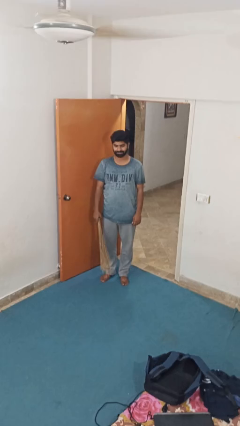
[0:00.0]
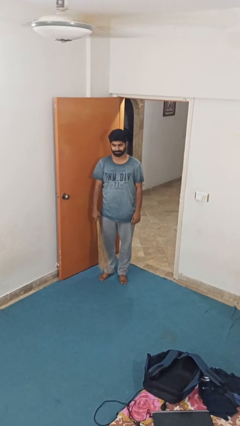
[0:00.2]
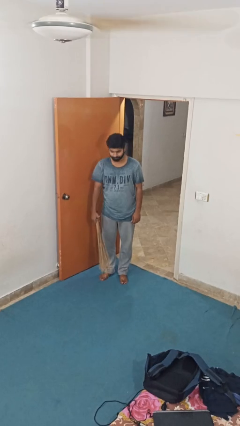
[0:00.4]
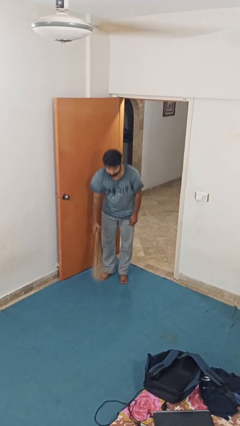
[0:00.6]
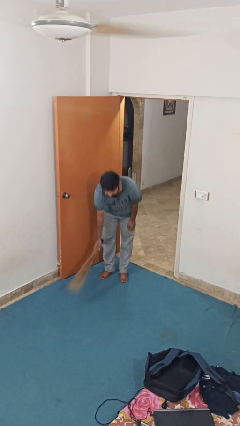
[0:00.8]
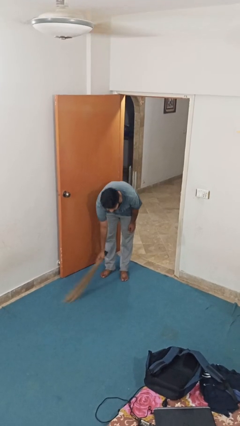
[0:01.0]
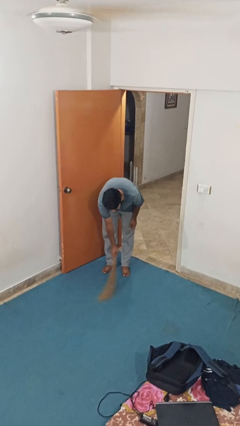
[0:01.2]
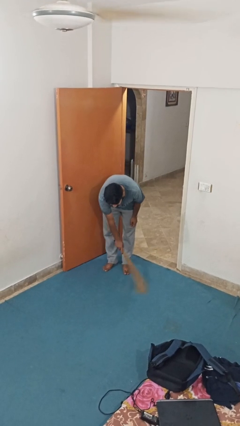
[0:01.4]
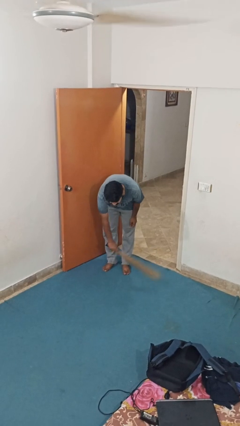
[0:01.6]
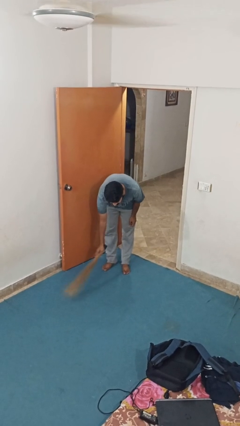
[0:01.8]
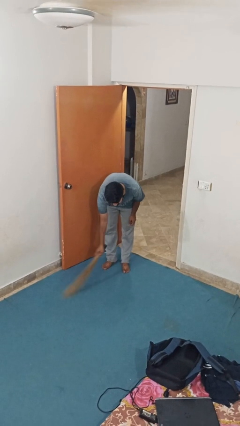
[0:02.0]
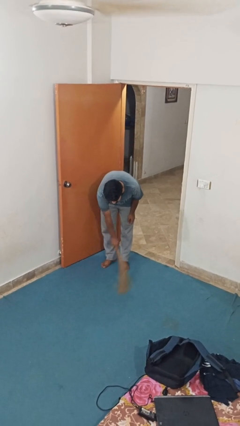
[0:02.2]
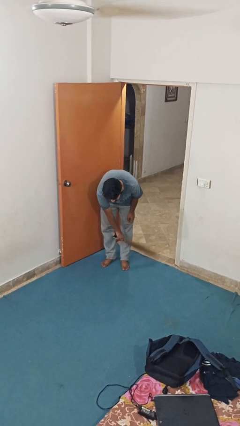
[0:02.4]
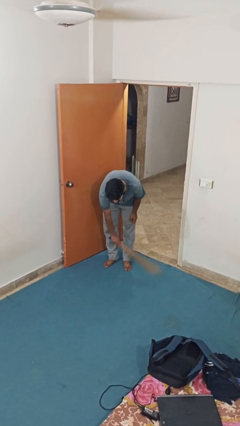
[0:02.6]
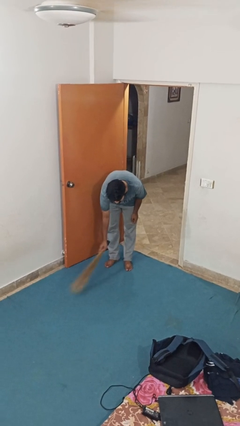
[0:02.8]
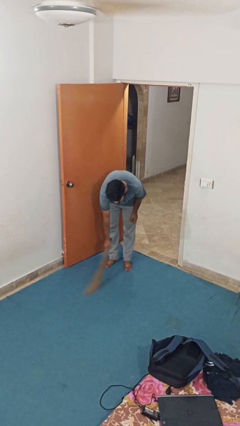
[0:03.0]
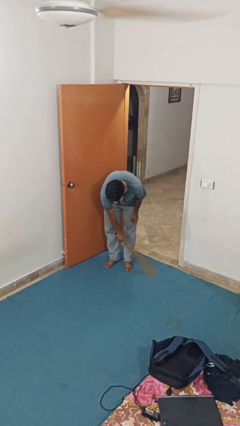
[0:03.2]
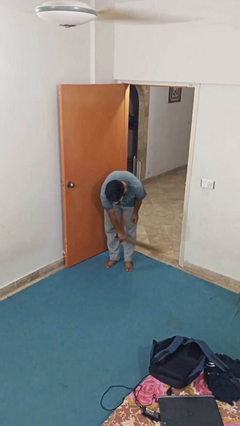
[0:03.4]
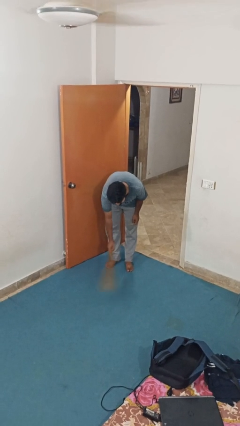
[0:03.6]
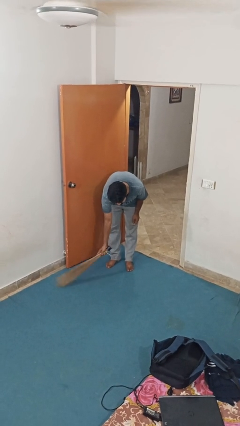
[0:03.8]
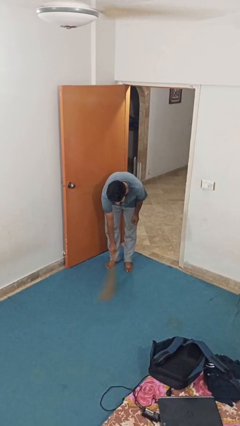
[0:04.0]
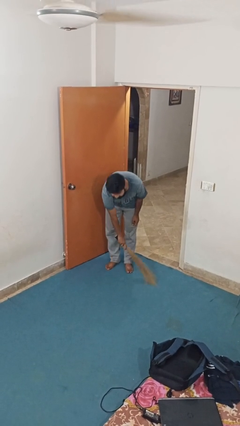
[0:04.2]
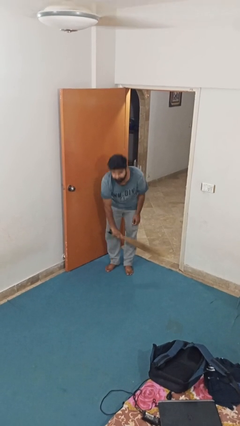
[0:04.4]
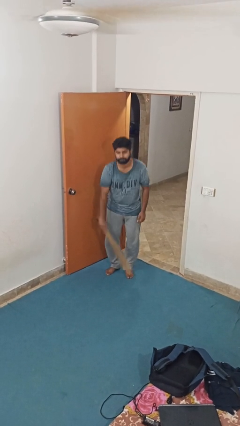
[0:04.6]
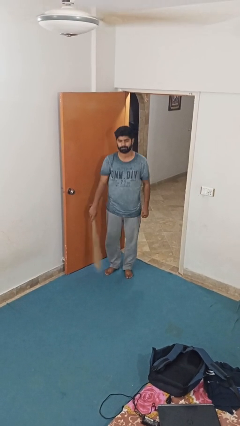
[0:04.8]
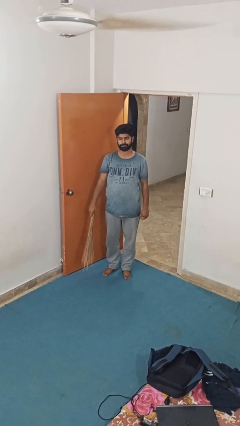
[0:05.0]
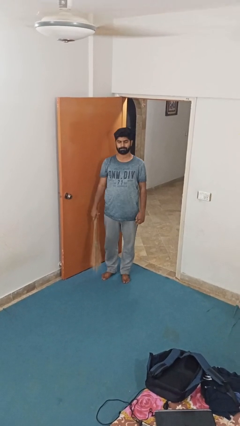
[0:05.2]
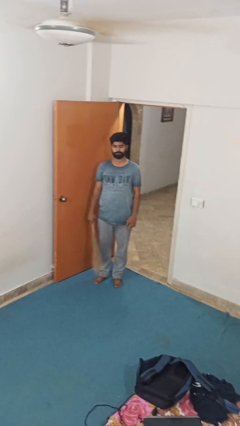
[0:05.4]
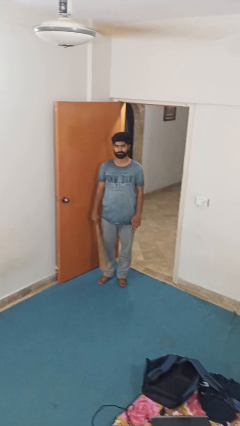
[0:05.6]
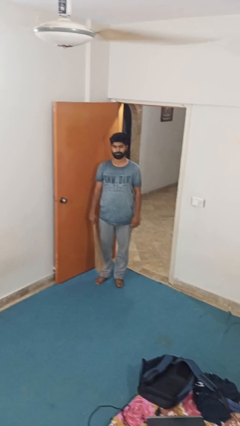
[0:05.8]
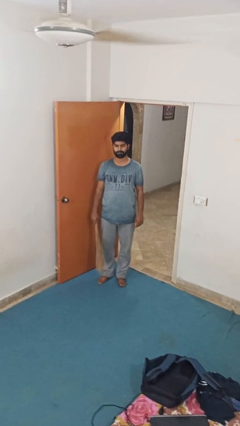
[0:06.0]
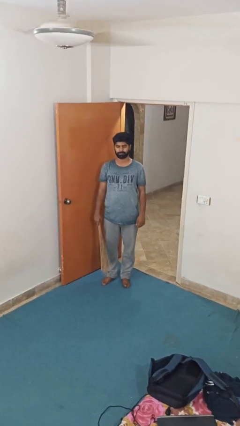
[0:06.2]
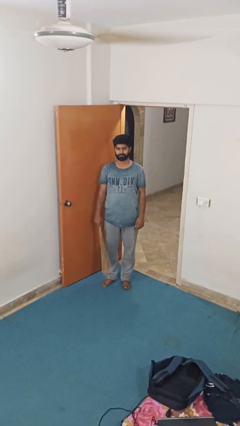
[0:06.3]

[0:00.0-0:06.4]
person sweeps floor

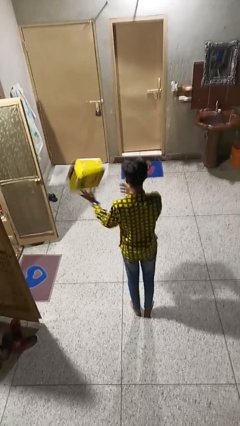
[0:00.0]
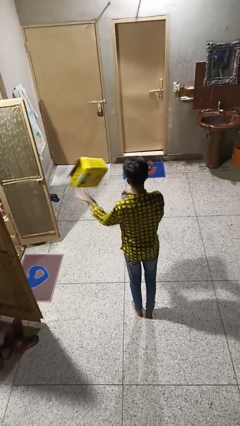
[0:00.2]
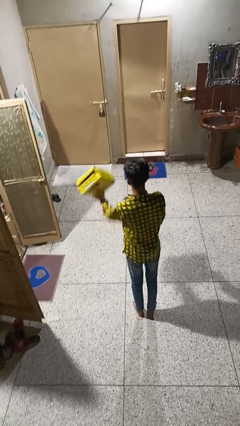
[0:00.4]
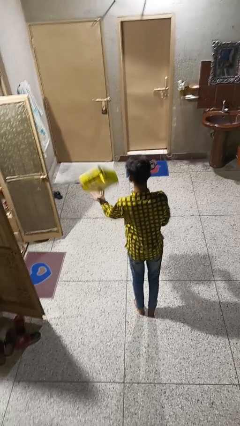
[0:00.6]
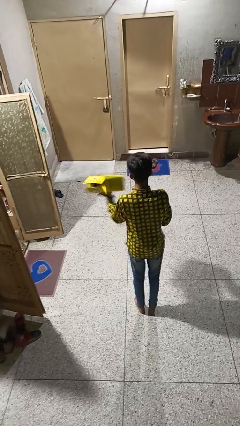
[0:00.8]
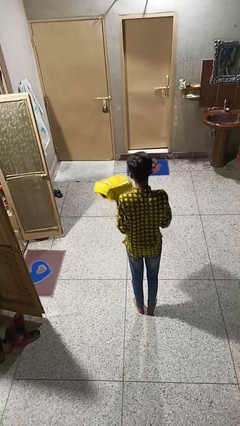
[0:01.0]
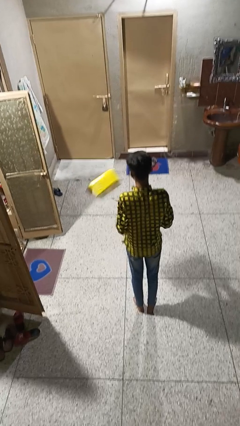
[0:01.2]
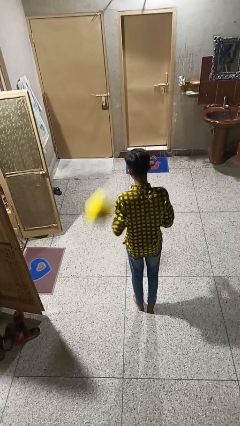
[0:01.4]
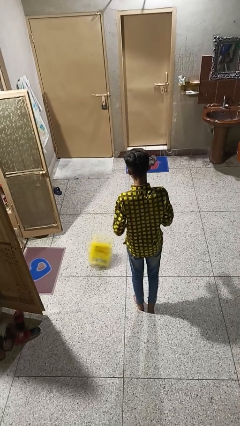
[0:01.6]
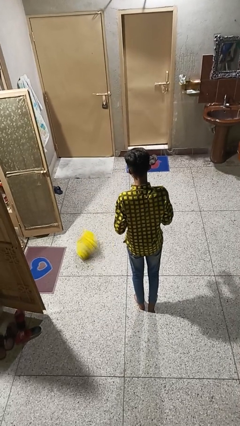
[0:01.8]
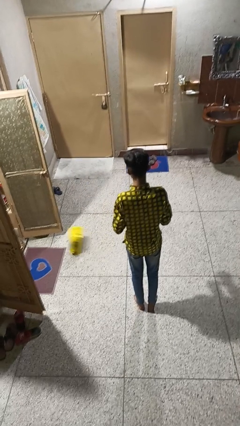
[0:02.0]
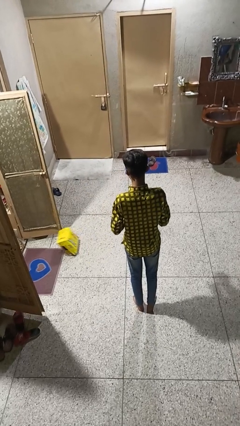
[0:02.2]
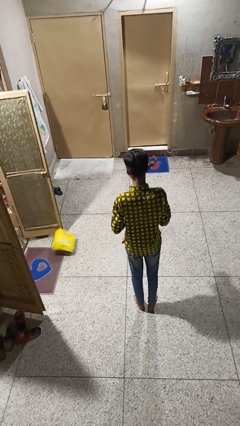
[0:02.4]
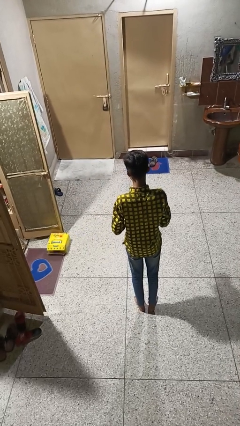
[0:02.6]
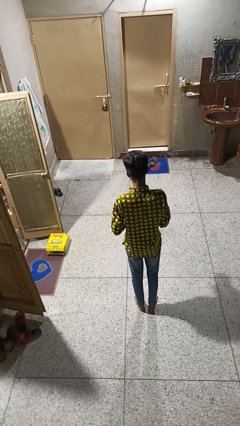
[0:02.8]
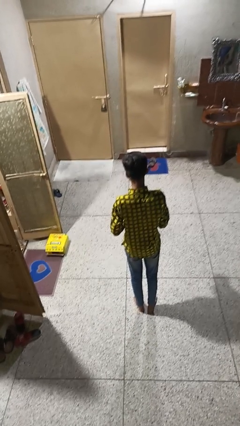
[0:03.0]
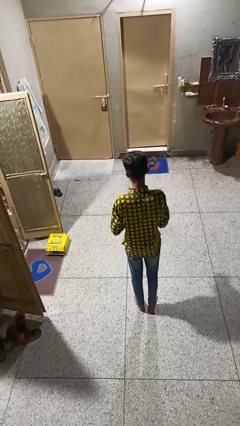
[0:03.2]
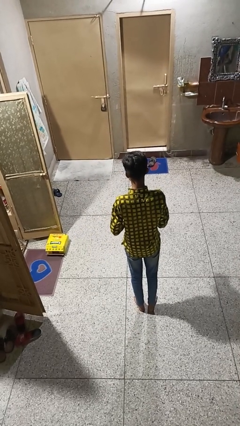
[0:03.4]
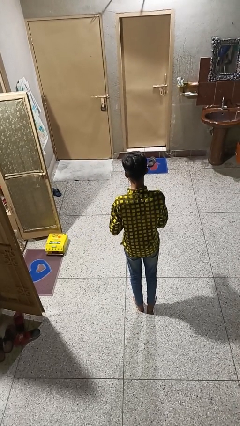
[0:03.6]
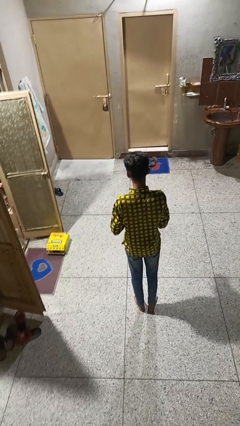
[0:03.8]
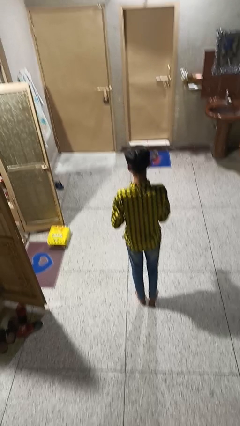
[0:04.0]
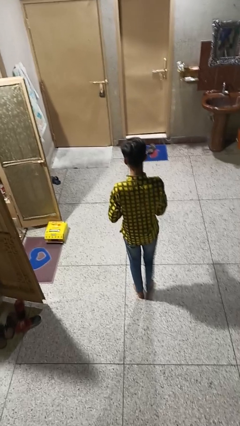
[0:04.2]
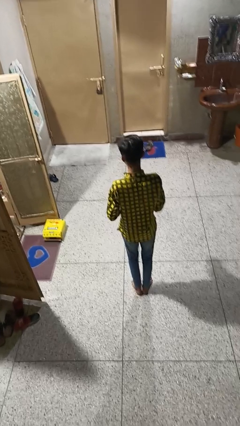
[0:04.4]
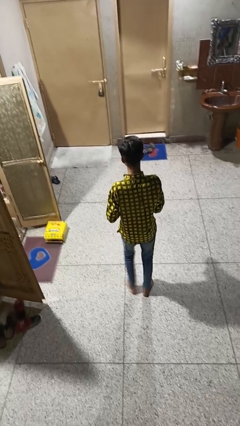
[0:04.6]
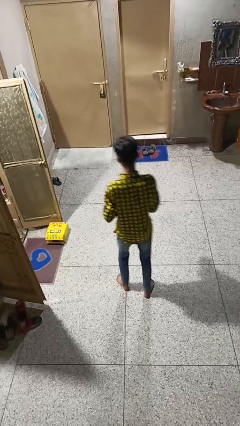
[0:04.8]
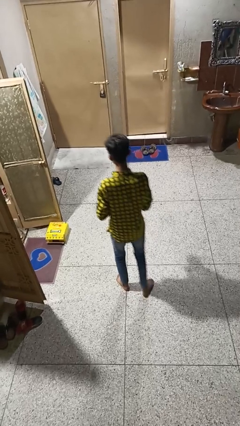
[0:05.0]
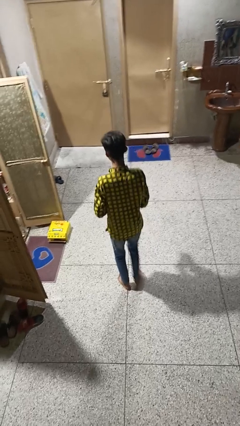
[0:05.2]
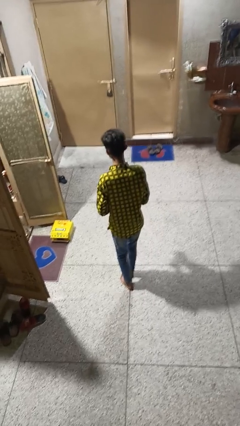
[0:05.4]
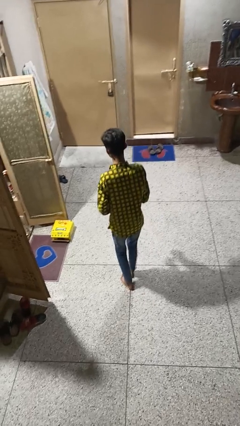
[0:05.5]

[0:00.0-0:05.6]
person catches dropped object

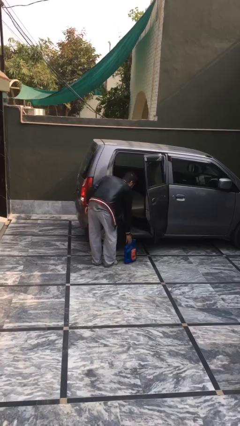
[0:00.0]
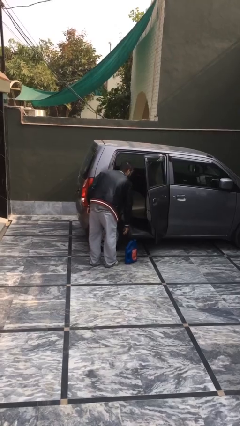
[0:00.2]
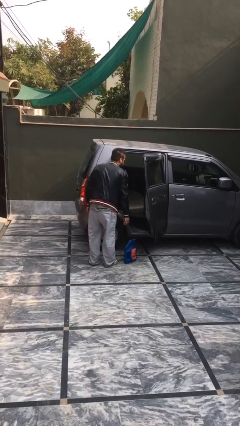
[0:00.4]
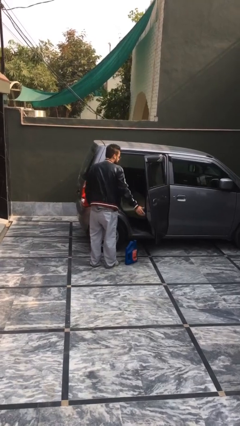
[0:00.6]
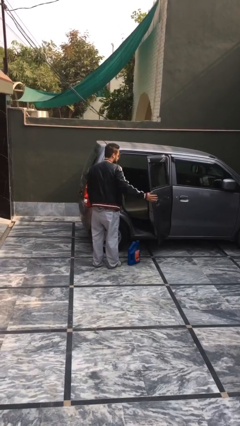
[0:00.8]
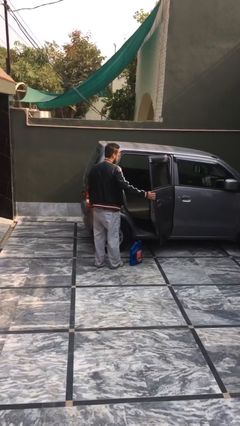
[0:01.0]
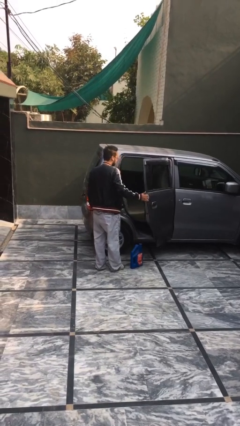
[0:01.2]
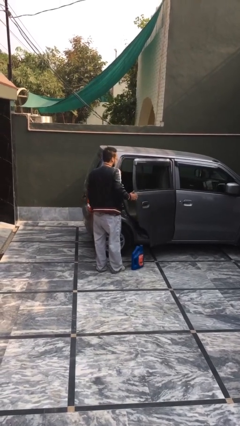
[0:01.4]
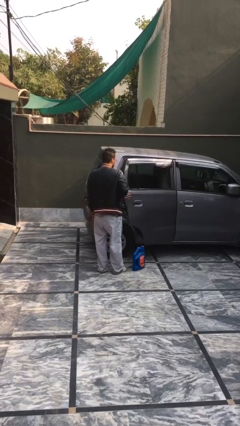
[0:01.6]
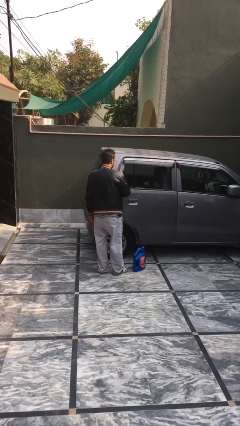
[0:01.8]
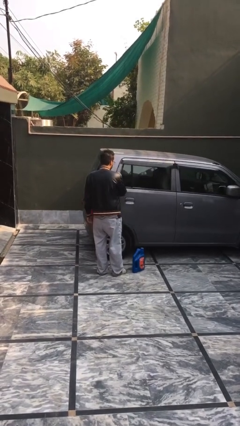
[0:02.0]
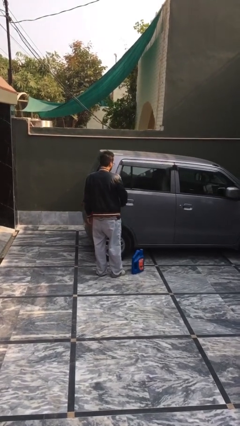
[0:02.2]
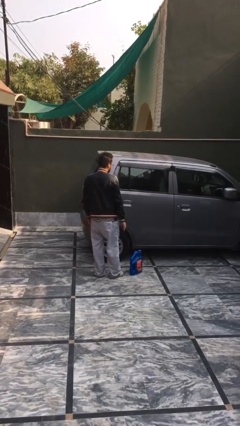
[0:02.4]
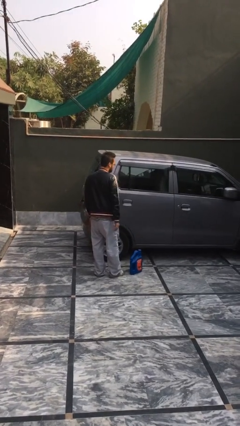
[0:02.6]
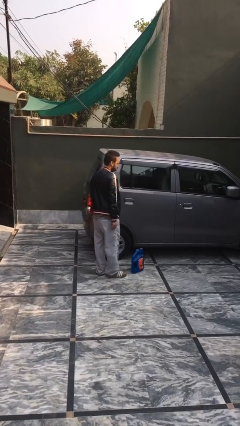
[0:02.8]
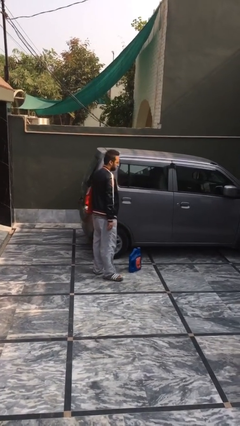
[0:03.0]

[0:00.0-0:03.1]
person closes car door

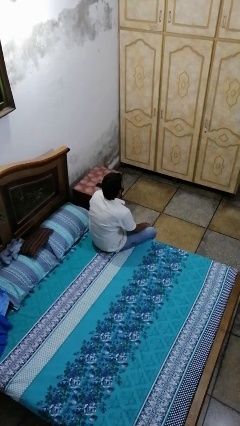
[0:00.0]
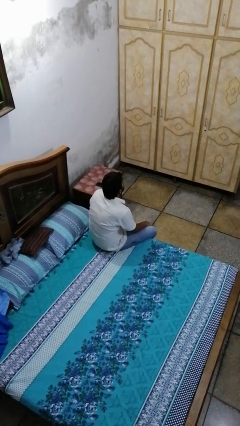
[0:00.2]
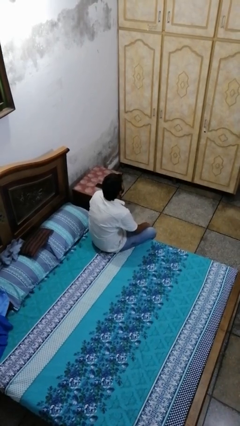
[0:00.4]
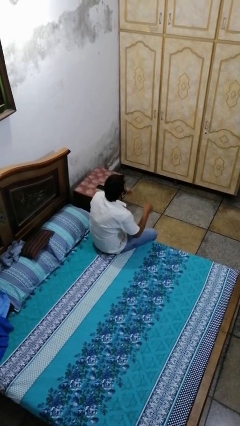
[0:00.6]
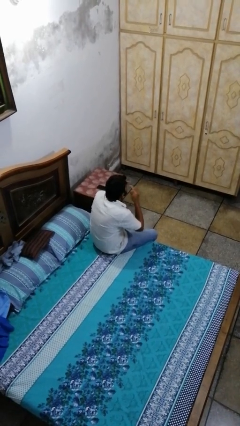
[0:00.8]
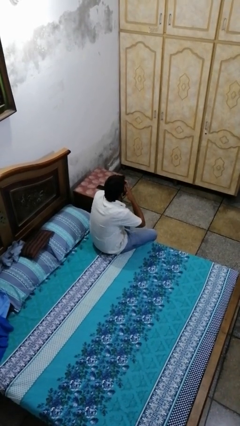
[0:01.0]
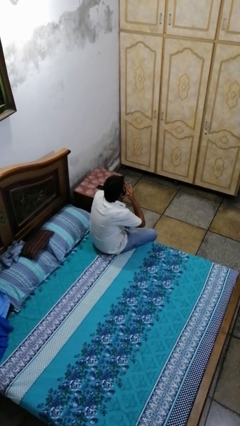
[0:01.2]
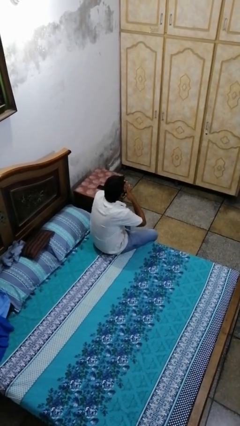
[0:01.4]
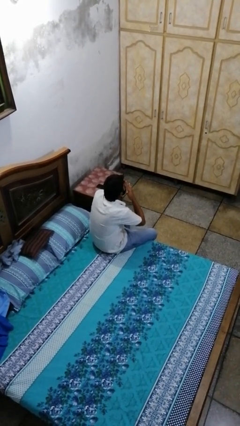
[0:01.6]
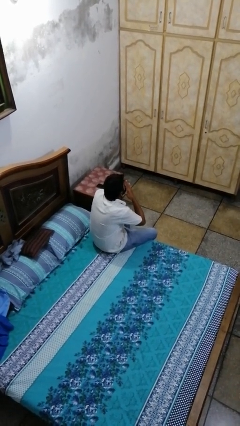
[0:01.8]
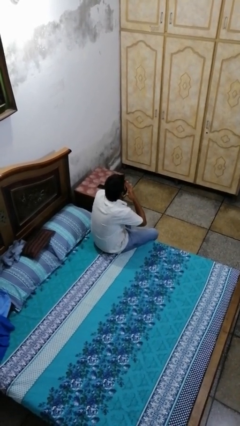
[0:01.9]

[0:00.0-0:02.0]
person rubs eyes

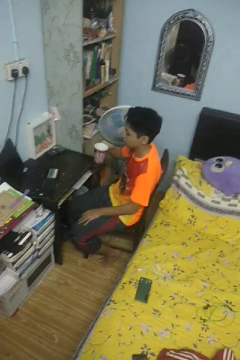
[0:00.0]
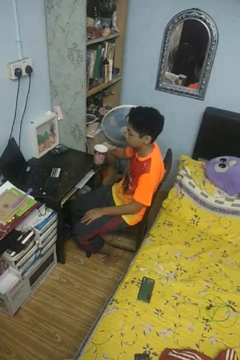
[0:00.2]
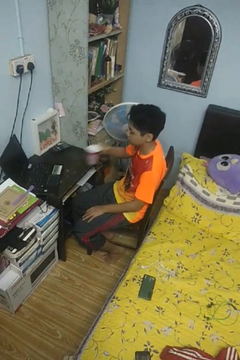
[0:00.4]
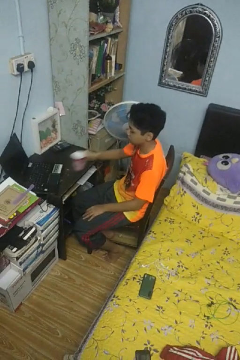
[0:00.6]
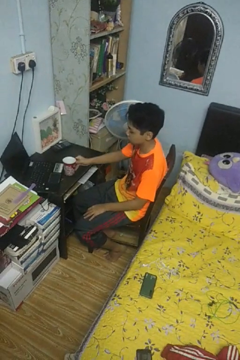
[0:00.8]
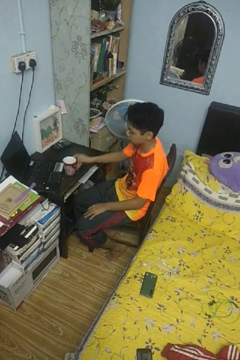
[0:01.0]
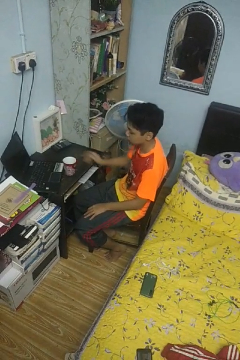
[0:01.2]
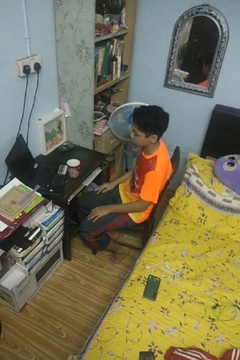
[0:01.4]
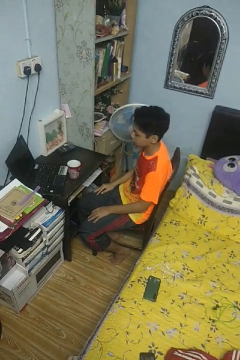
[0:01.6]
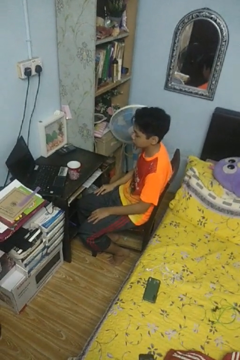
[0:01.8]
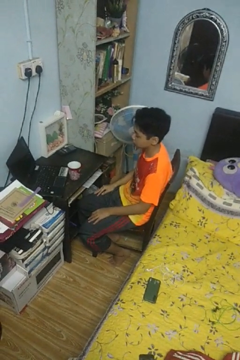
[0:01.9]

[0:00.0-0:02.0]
person closes refrigerator
